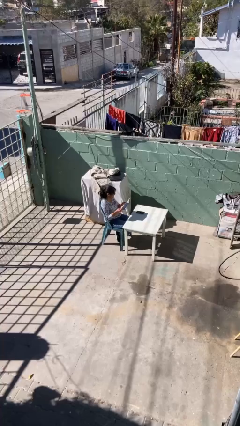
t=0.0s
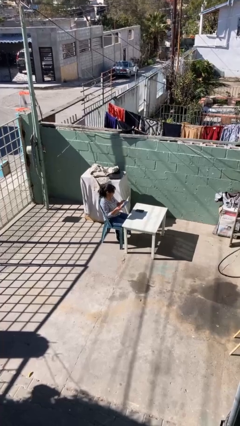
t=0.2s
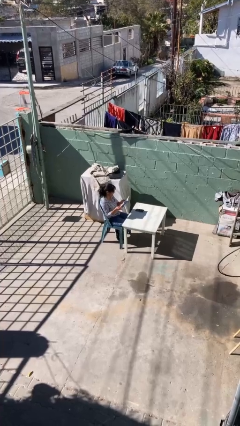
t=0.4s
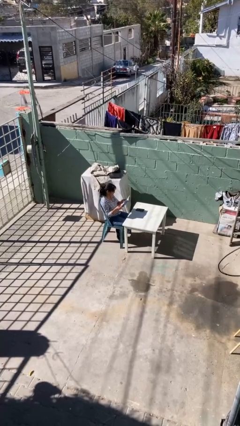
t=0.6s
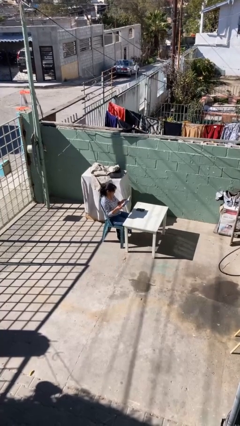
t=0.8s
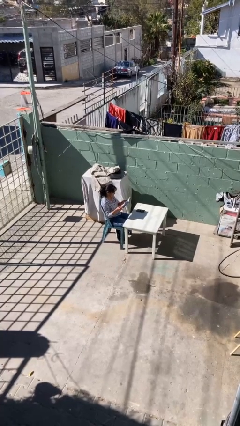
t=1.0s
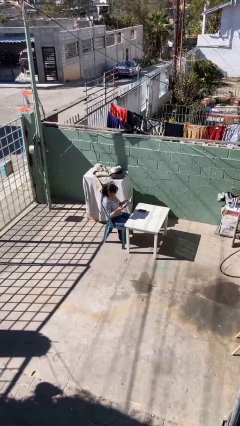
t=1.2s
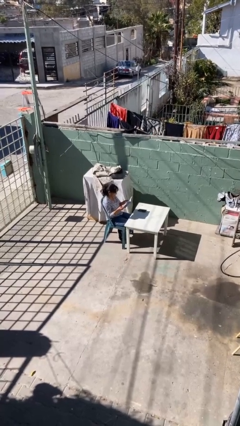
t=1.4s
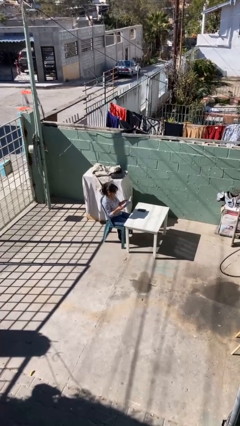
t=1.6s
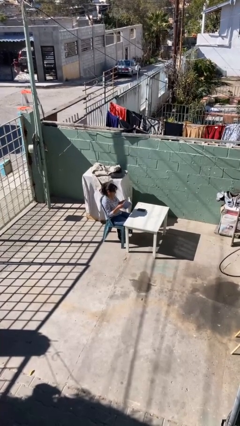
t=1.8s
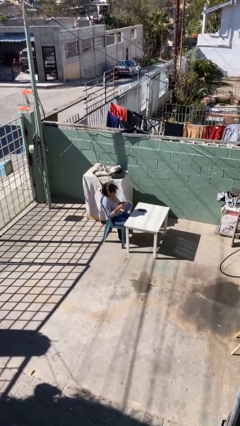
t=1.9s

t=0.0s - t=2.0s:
person reads document

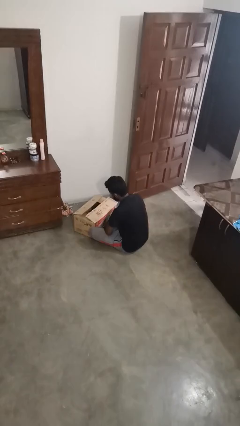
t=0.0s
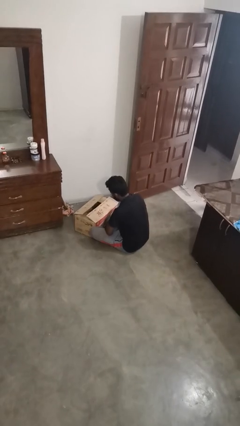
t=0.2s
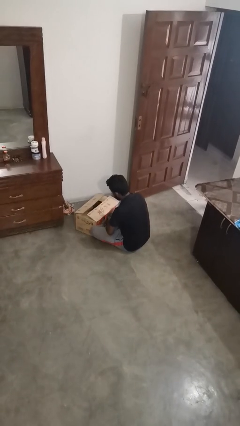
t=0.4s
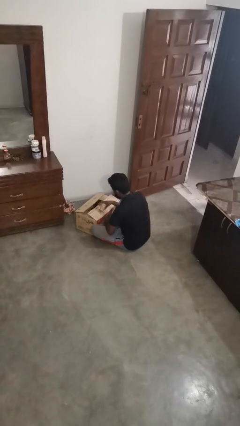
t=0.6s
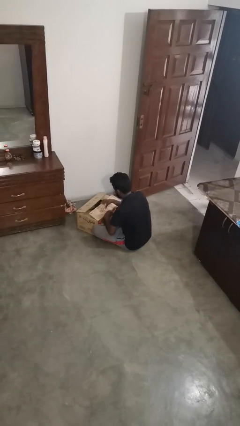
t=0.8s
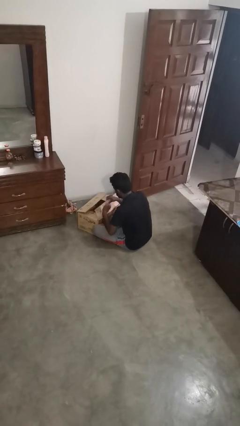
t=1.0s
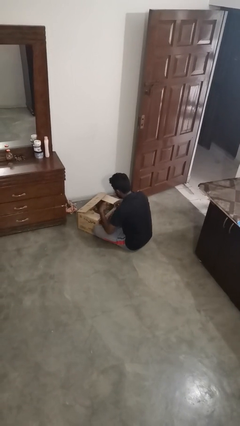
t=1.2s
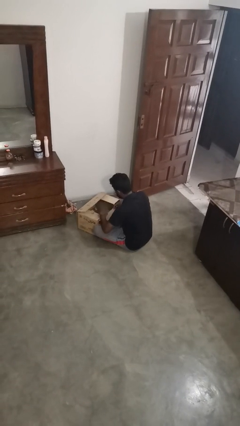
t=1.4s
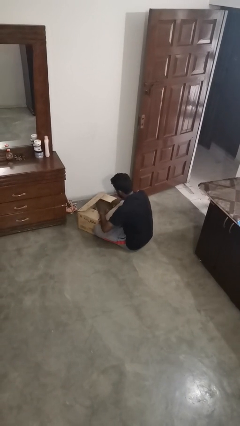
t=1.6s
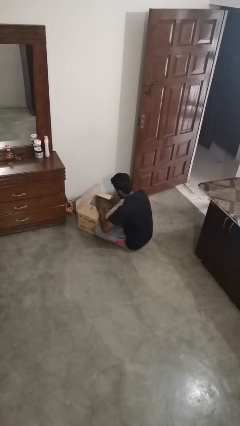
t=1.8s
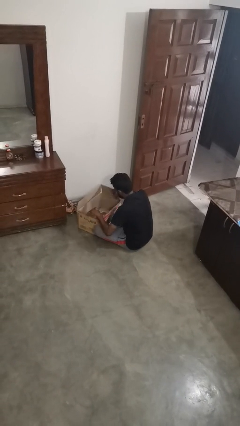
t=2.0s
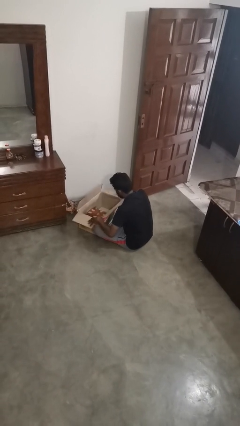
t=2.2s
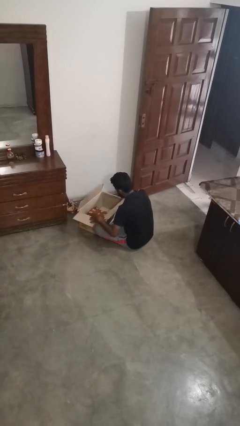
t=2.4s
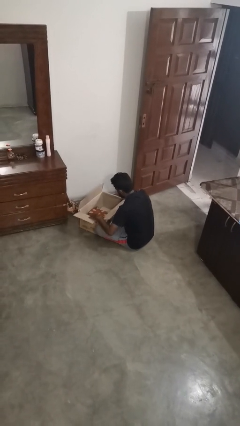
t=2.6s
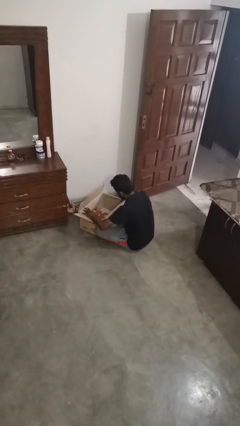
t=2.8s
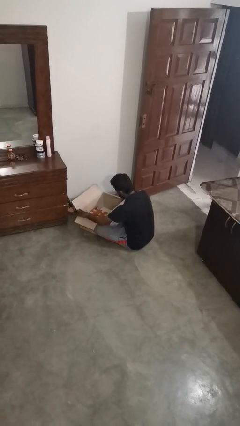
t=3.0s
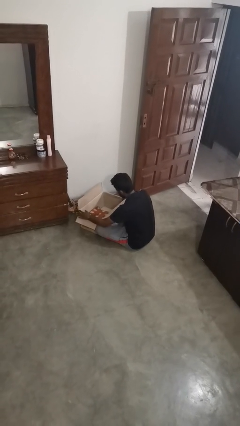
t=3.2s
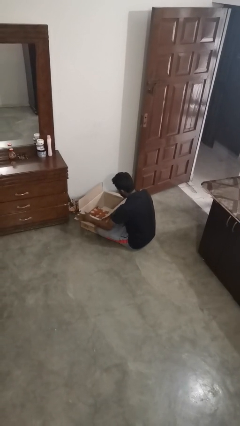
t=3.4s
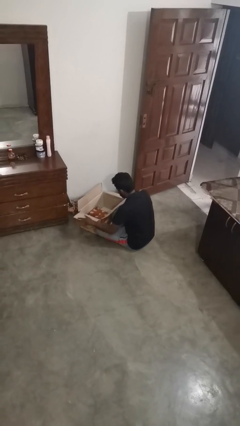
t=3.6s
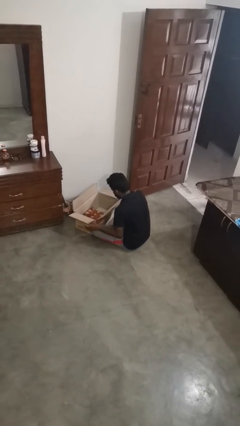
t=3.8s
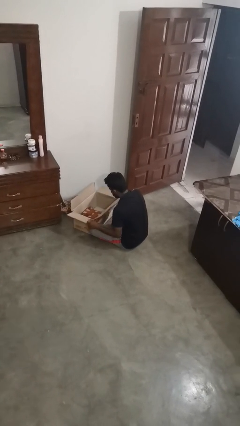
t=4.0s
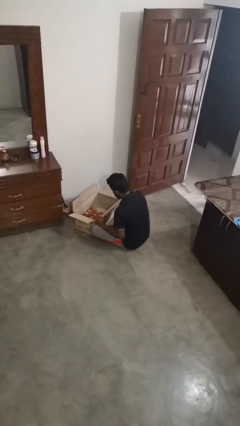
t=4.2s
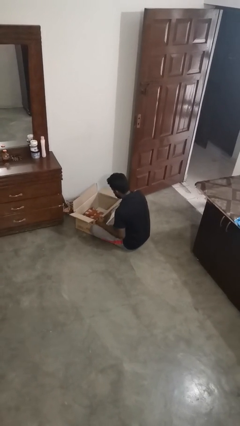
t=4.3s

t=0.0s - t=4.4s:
person opens box

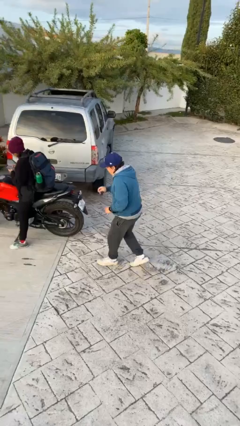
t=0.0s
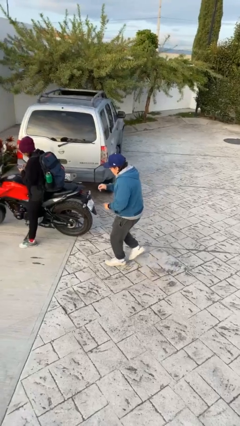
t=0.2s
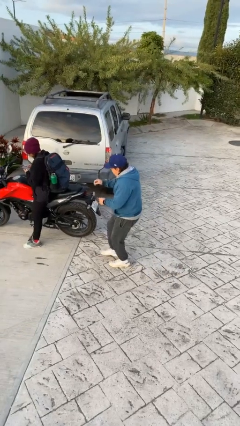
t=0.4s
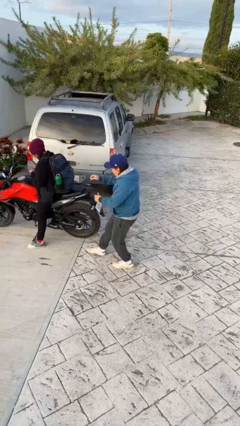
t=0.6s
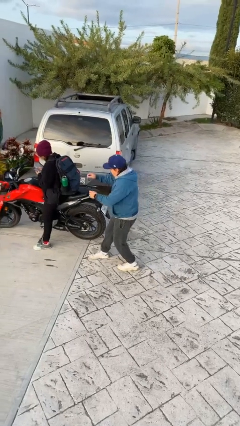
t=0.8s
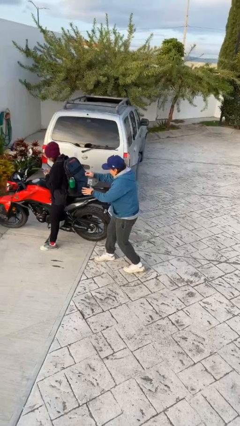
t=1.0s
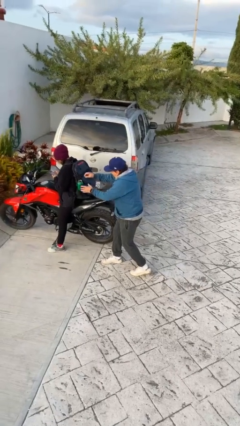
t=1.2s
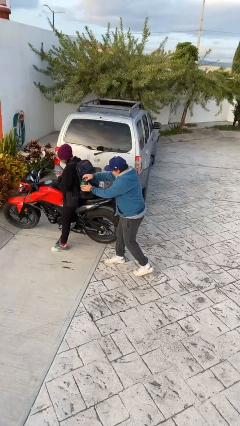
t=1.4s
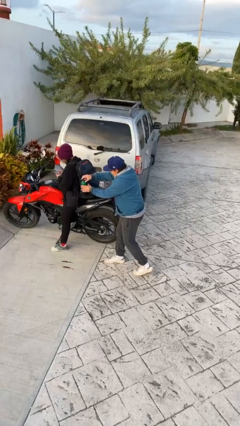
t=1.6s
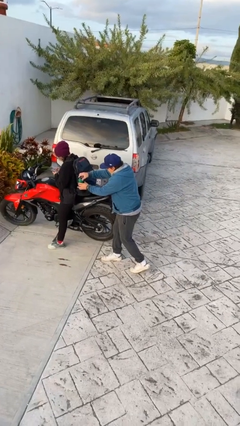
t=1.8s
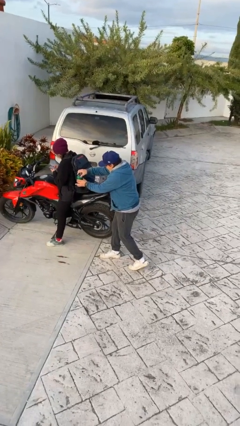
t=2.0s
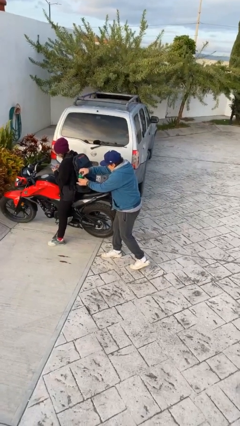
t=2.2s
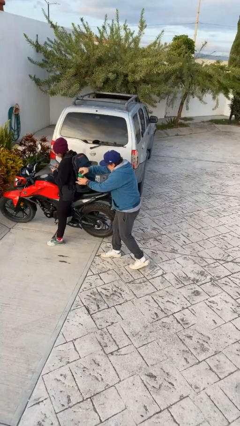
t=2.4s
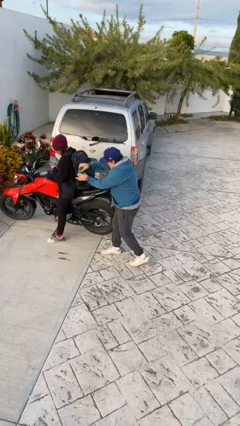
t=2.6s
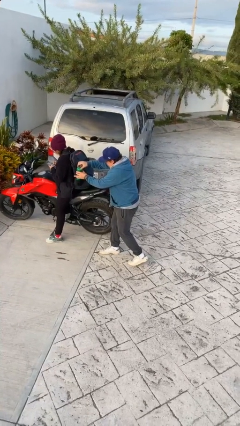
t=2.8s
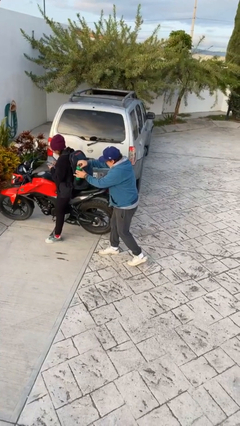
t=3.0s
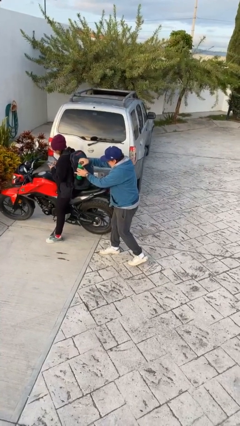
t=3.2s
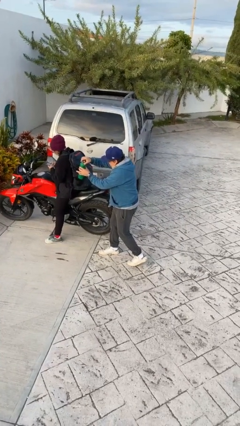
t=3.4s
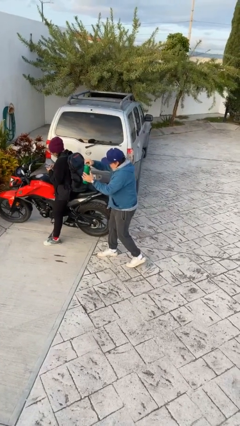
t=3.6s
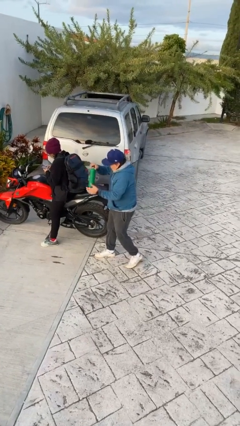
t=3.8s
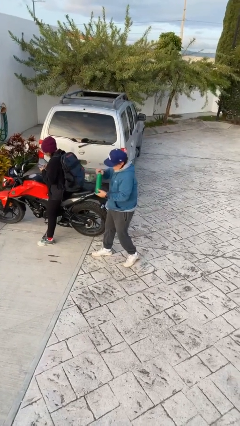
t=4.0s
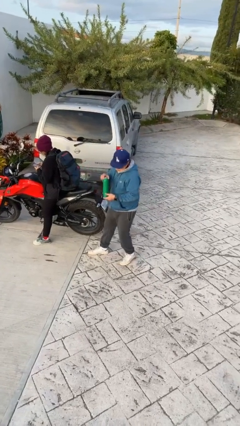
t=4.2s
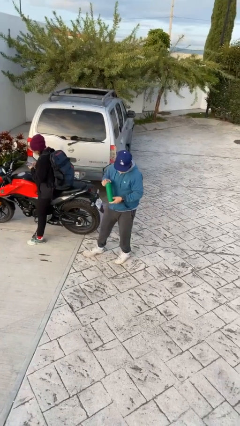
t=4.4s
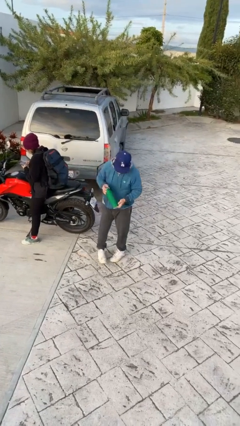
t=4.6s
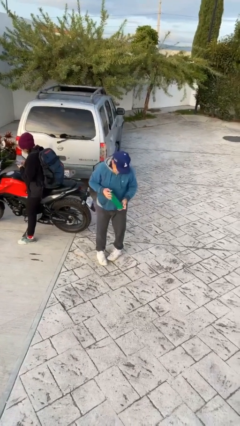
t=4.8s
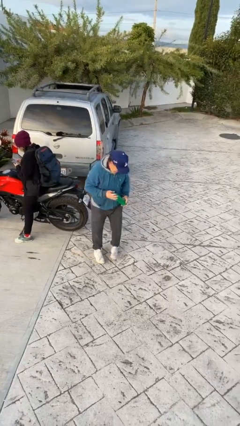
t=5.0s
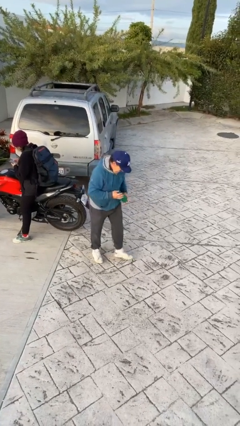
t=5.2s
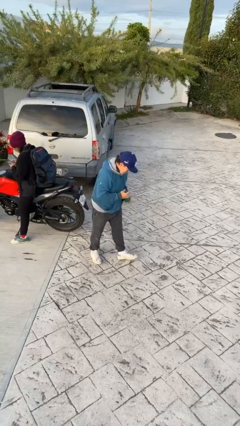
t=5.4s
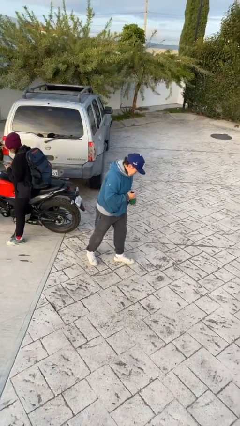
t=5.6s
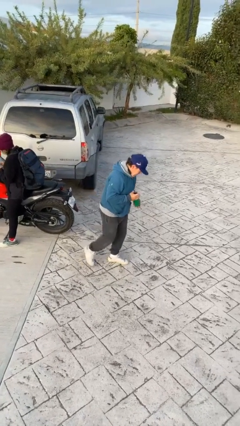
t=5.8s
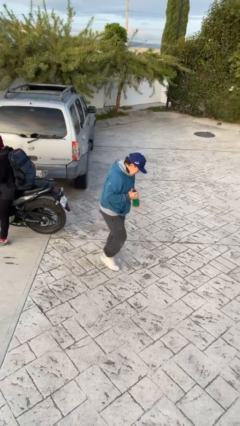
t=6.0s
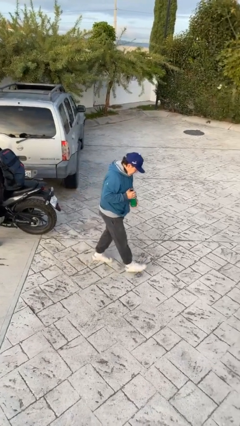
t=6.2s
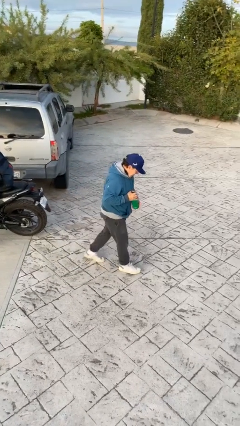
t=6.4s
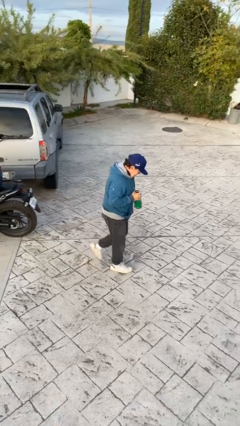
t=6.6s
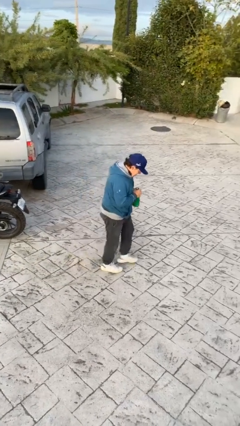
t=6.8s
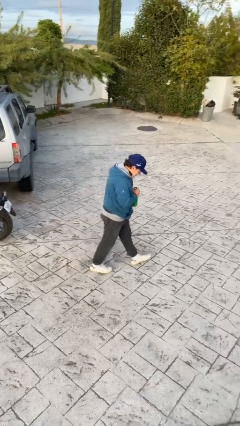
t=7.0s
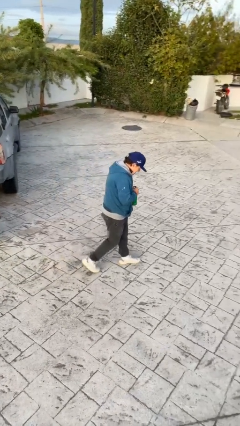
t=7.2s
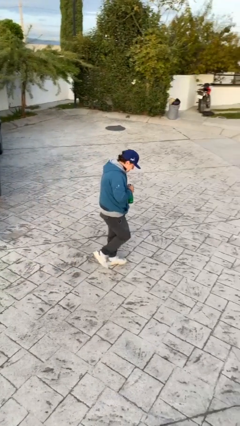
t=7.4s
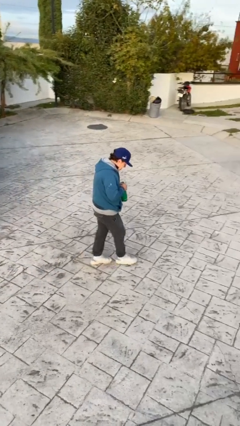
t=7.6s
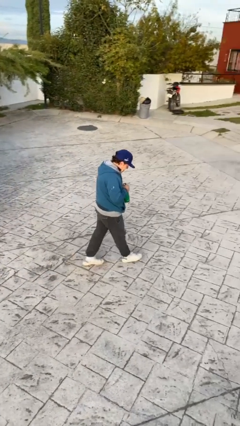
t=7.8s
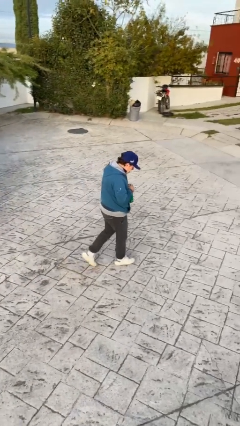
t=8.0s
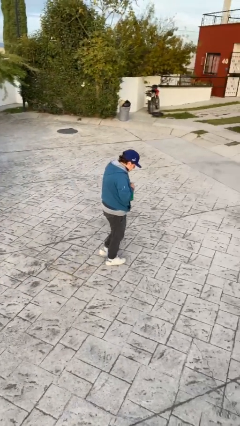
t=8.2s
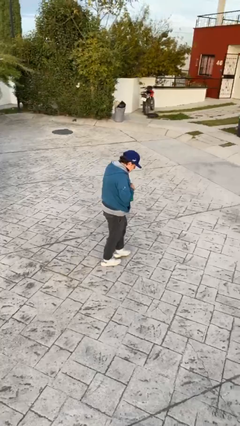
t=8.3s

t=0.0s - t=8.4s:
person steals object from person

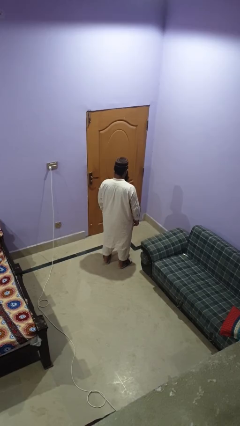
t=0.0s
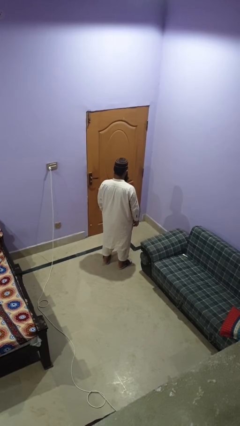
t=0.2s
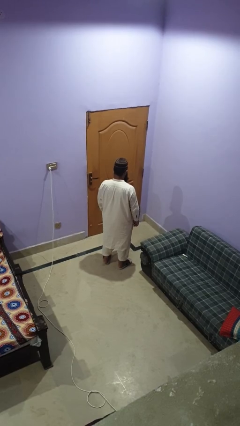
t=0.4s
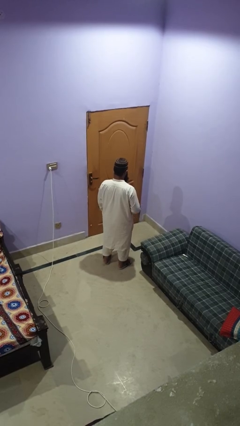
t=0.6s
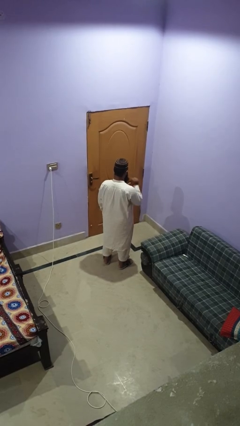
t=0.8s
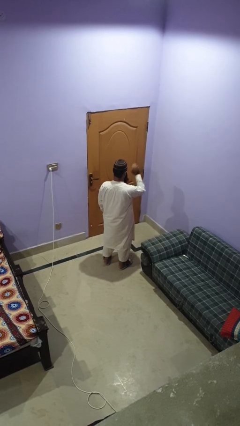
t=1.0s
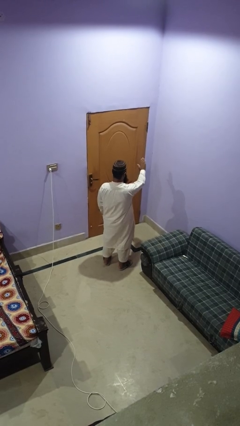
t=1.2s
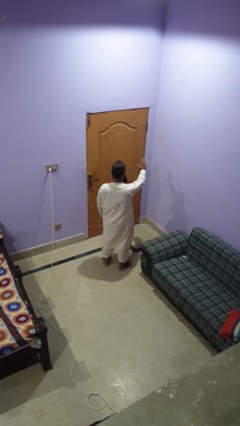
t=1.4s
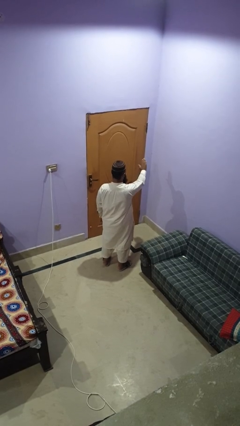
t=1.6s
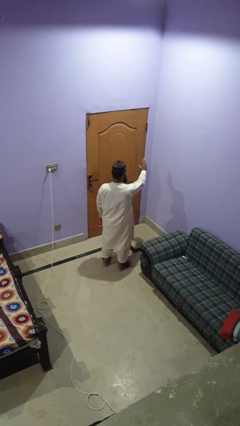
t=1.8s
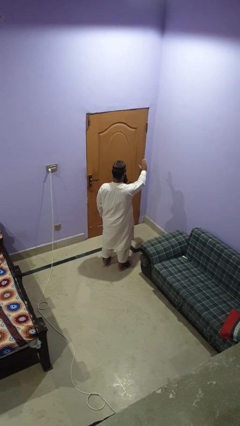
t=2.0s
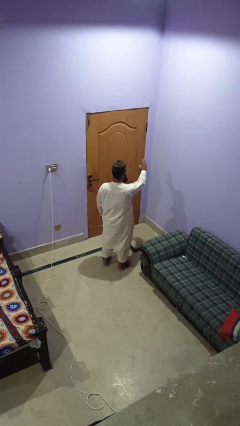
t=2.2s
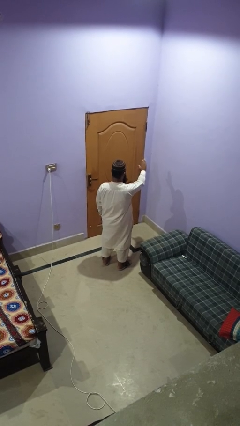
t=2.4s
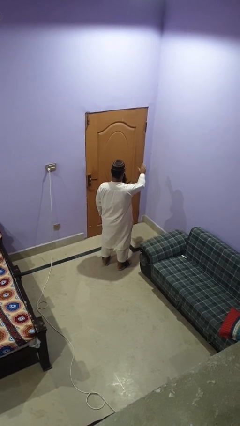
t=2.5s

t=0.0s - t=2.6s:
person gestures stop

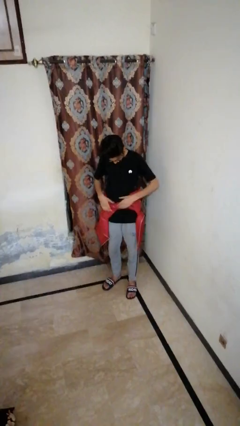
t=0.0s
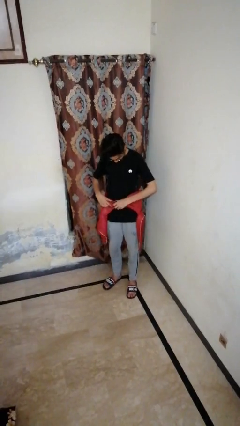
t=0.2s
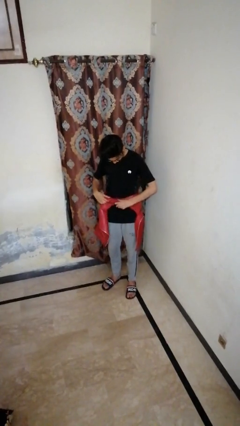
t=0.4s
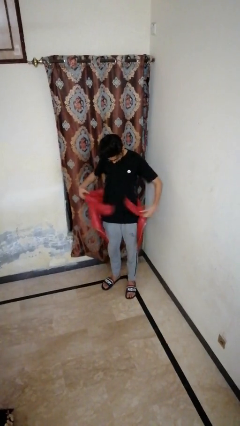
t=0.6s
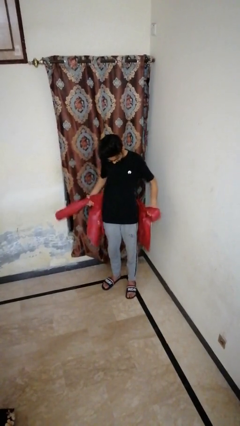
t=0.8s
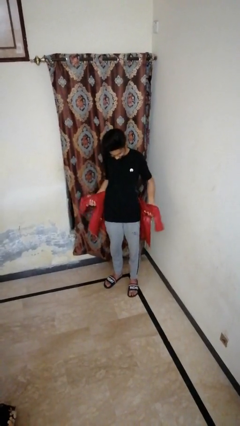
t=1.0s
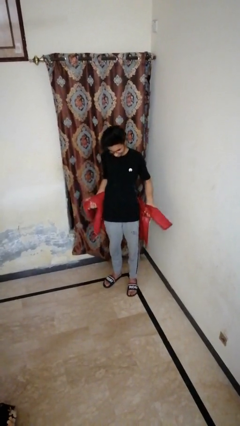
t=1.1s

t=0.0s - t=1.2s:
person unties jacket around waist
